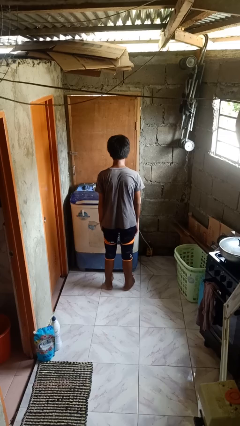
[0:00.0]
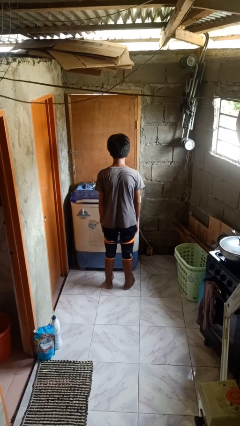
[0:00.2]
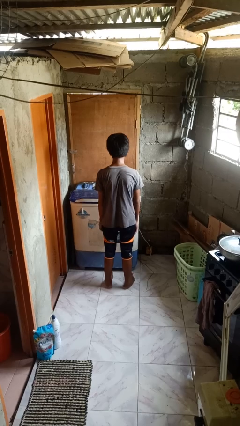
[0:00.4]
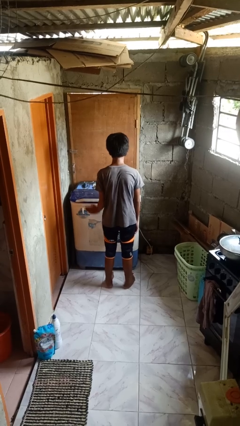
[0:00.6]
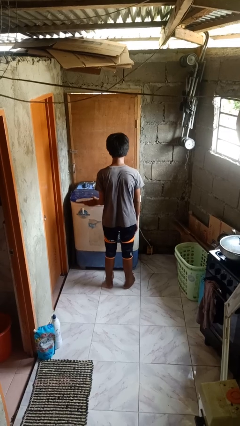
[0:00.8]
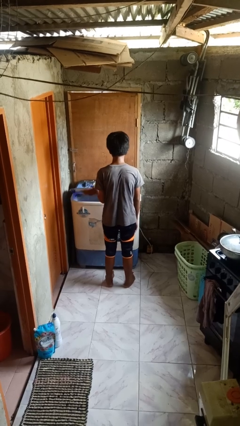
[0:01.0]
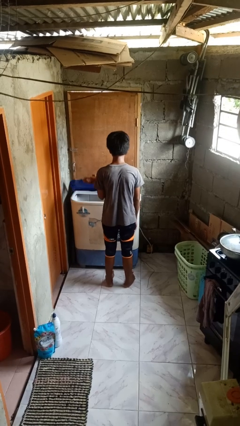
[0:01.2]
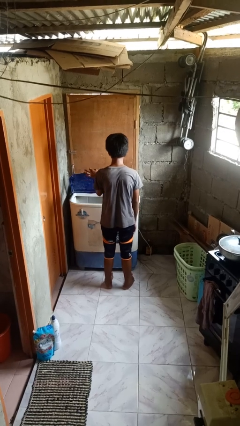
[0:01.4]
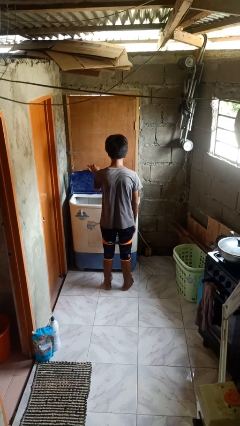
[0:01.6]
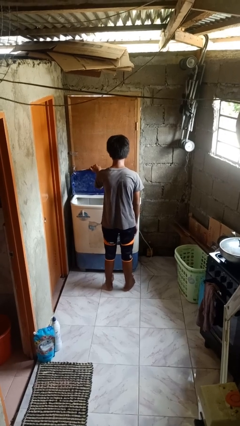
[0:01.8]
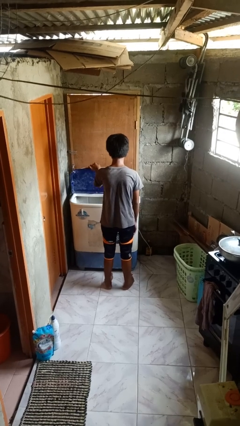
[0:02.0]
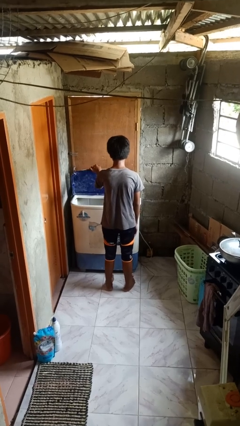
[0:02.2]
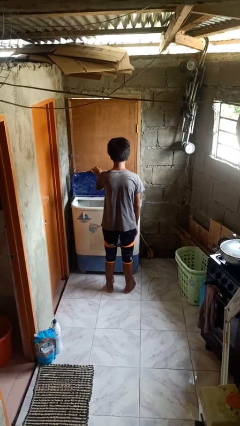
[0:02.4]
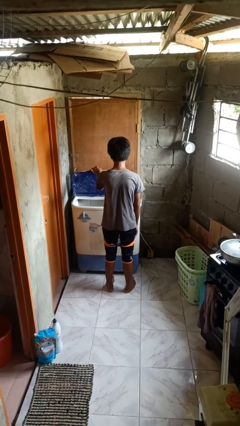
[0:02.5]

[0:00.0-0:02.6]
person opens clothes washer

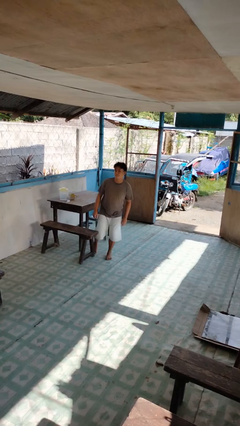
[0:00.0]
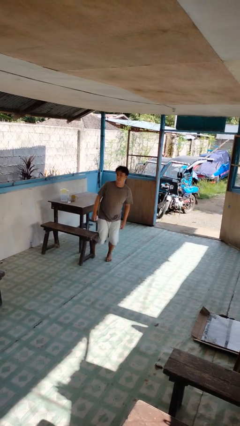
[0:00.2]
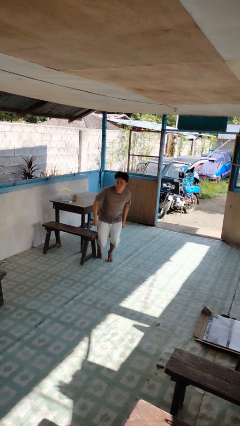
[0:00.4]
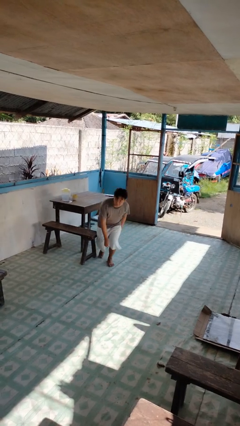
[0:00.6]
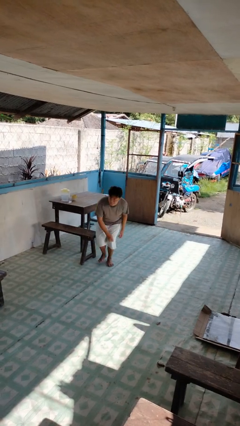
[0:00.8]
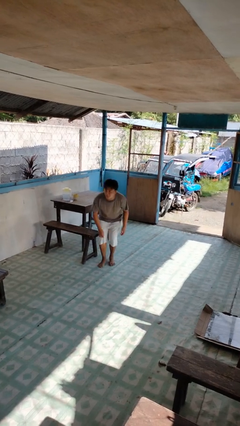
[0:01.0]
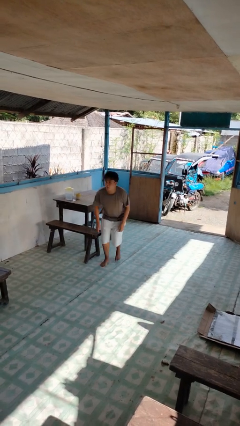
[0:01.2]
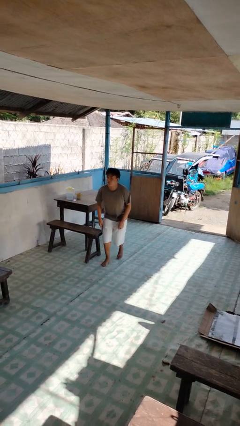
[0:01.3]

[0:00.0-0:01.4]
person stubs toe

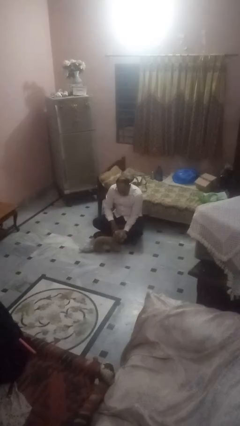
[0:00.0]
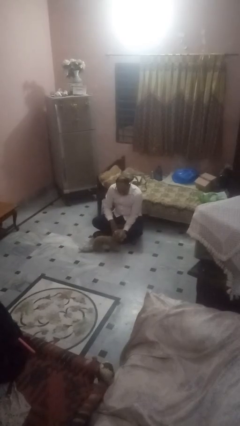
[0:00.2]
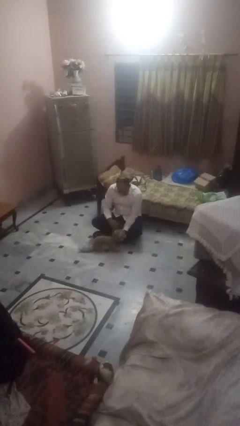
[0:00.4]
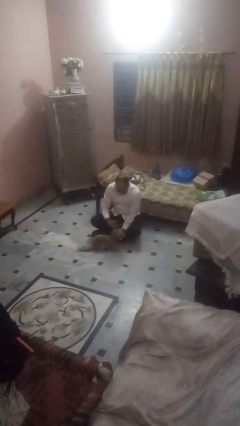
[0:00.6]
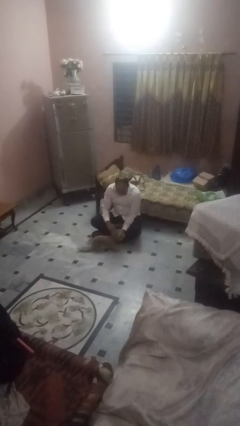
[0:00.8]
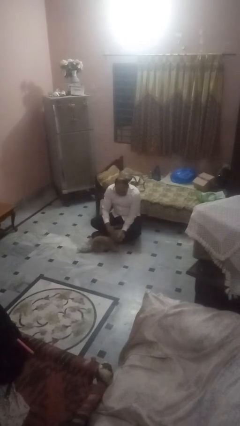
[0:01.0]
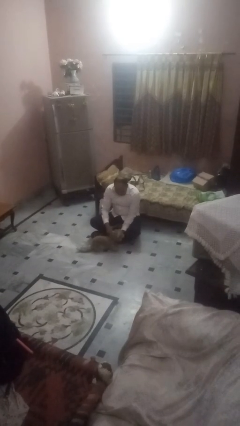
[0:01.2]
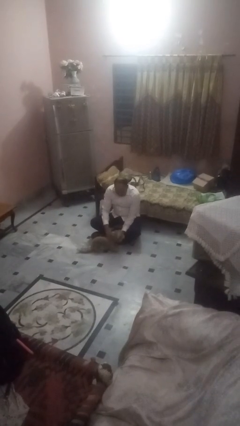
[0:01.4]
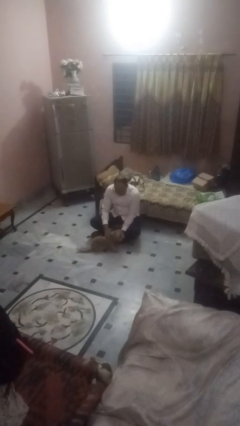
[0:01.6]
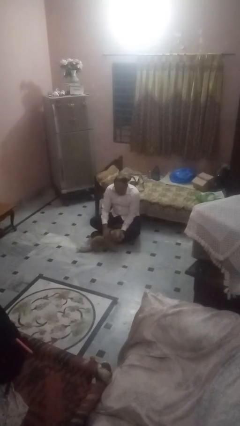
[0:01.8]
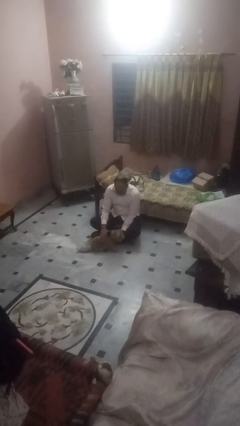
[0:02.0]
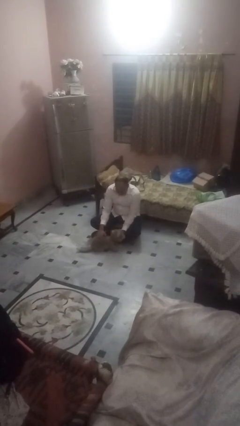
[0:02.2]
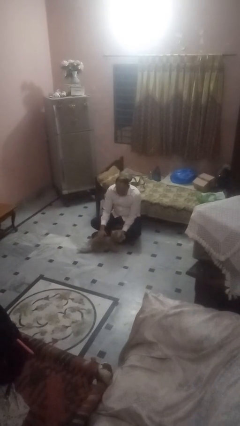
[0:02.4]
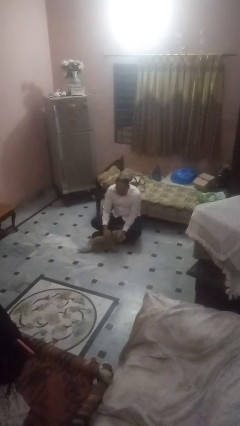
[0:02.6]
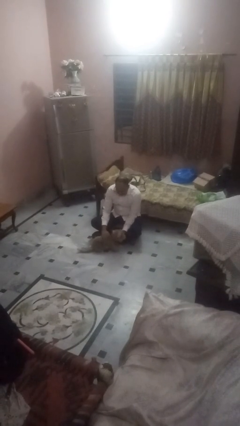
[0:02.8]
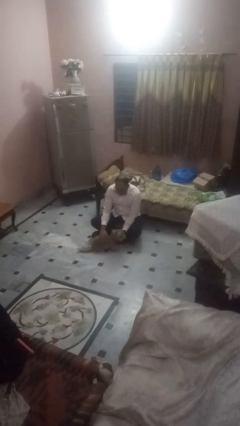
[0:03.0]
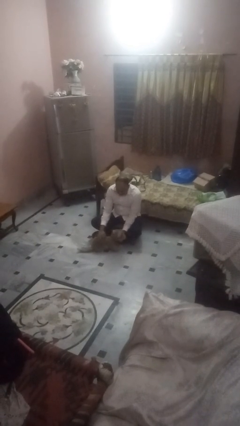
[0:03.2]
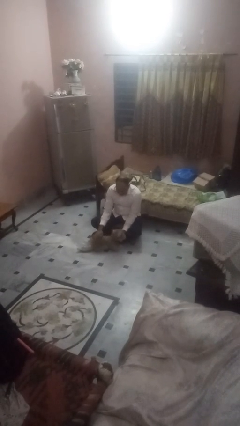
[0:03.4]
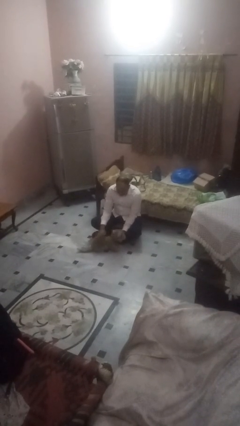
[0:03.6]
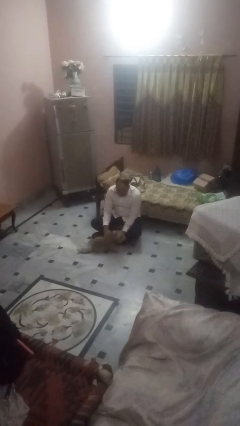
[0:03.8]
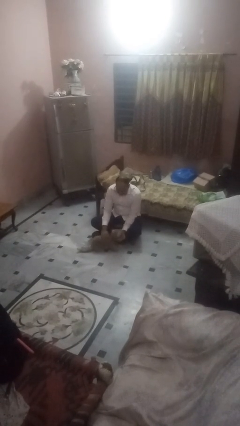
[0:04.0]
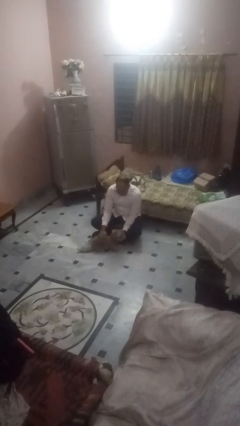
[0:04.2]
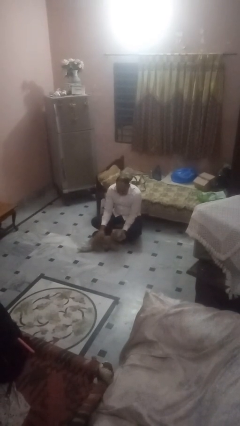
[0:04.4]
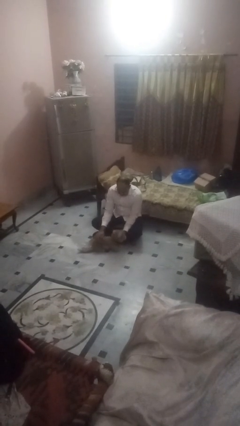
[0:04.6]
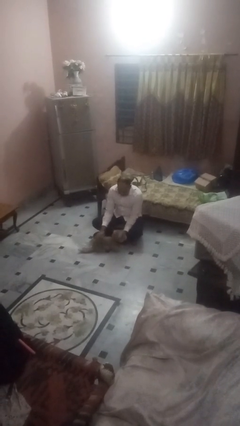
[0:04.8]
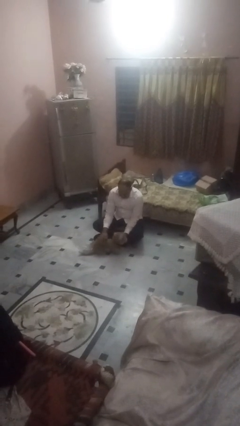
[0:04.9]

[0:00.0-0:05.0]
person pets dog

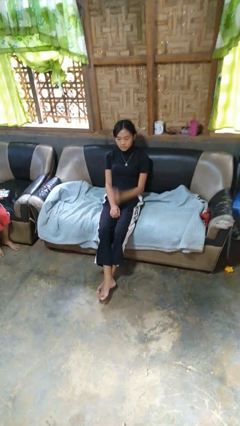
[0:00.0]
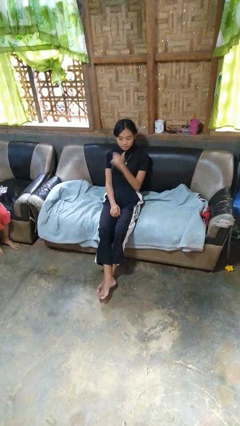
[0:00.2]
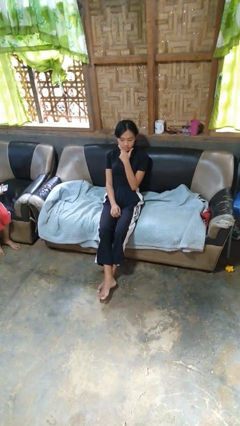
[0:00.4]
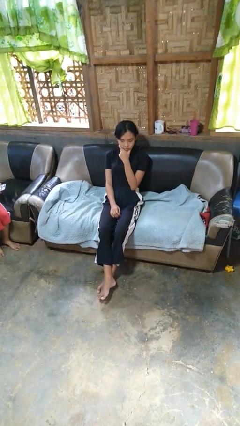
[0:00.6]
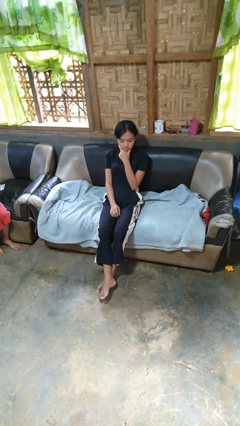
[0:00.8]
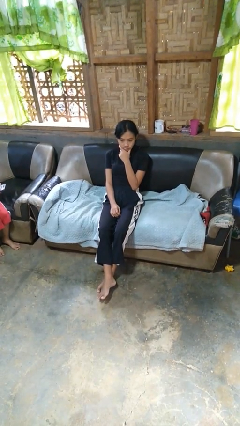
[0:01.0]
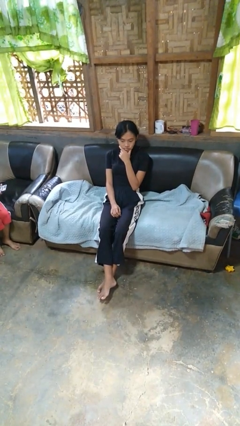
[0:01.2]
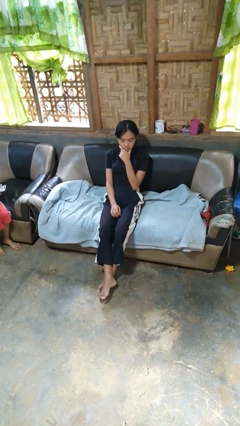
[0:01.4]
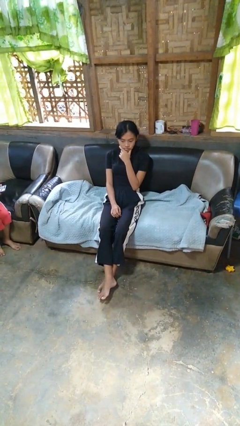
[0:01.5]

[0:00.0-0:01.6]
person strokes chin

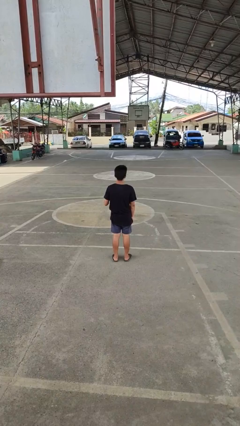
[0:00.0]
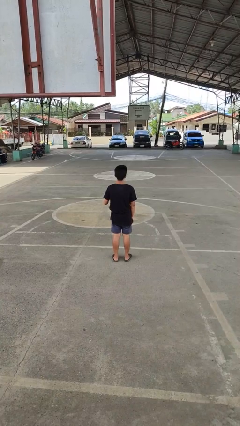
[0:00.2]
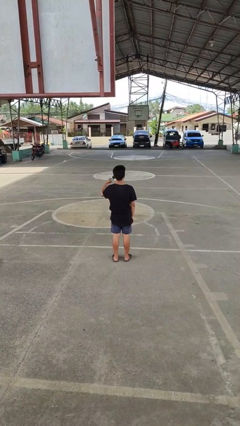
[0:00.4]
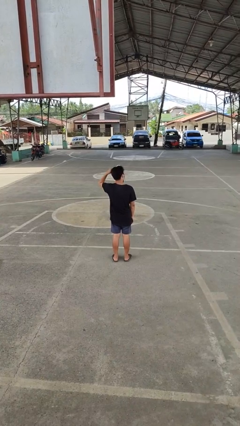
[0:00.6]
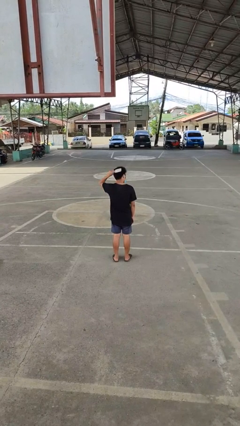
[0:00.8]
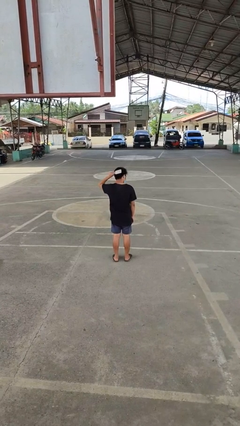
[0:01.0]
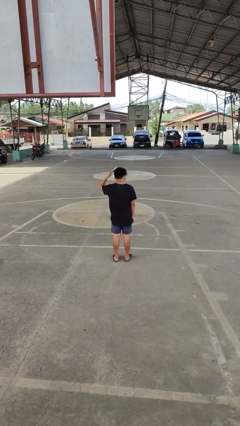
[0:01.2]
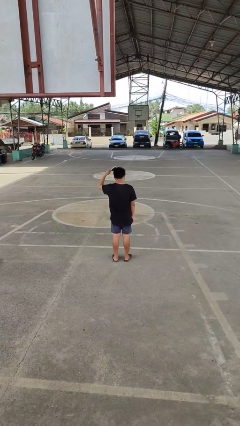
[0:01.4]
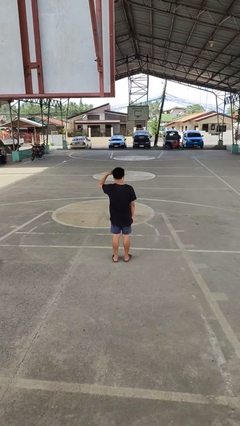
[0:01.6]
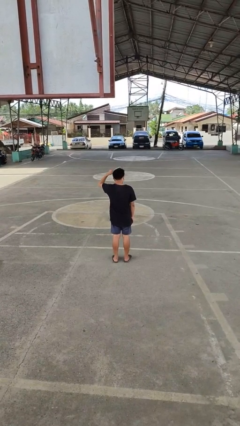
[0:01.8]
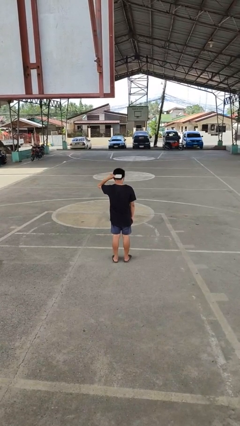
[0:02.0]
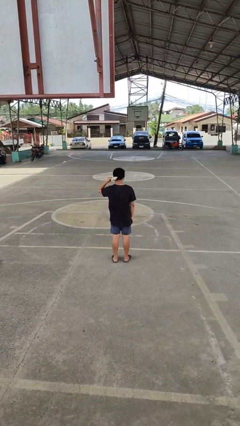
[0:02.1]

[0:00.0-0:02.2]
person brushes hair

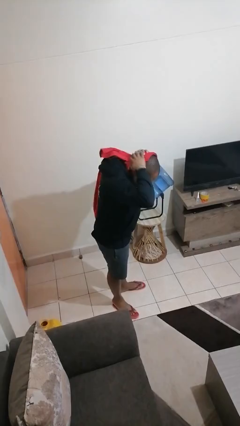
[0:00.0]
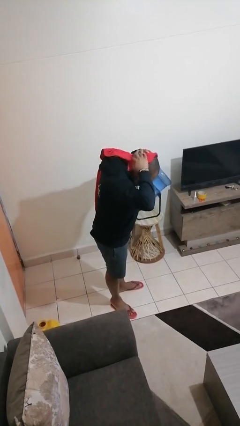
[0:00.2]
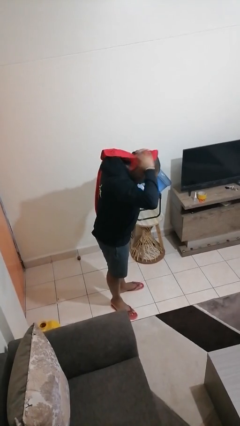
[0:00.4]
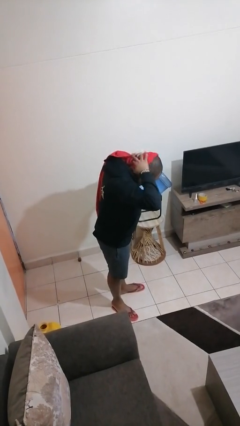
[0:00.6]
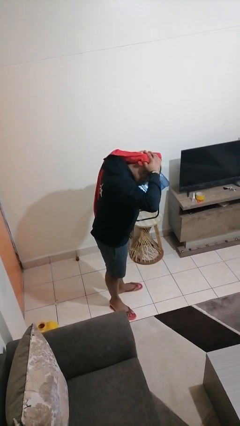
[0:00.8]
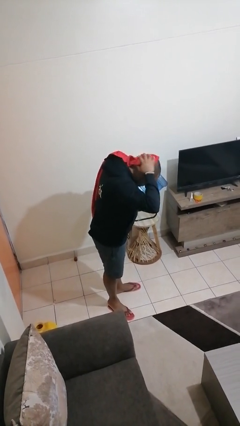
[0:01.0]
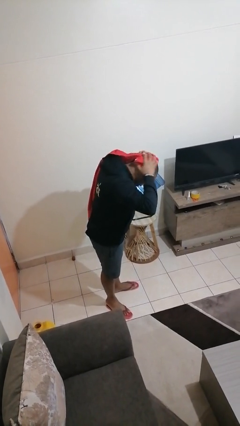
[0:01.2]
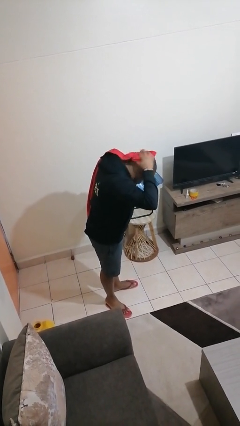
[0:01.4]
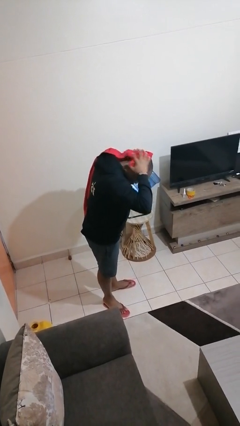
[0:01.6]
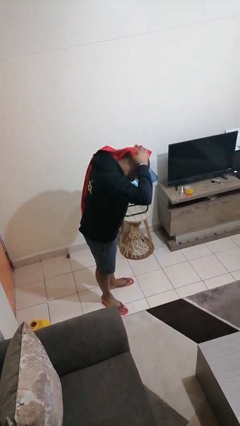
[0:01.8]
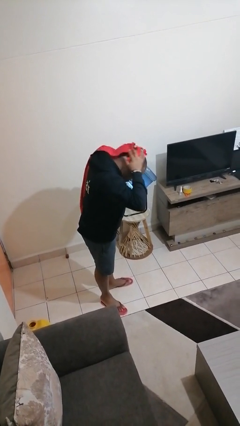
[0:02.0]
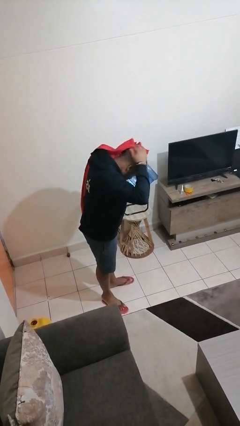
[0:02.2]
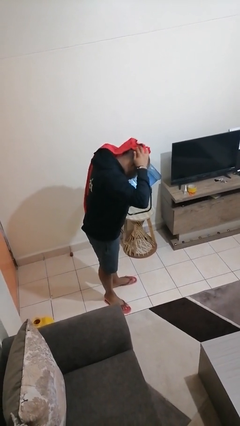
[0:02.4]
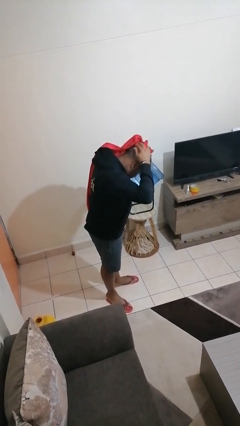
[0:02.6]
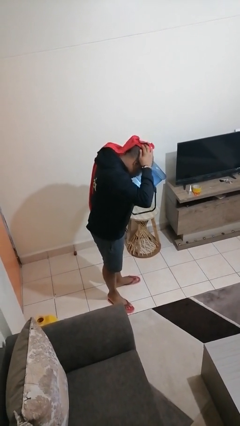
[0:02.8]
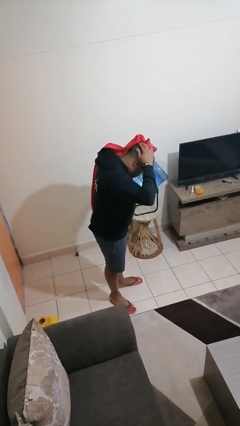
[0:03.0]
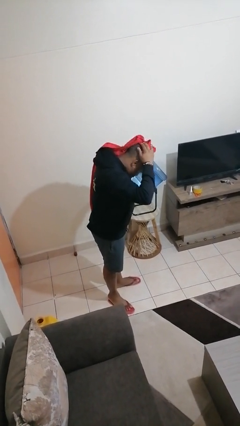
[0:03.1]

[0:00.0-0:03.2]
person dries hair with towel

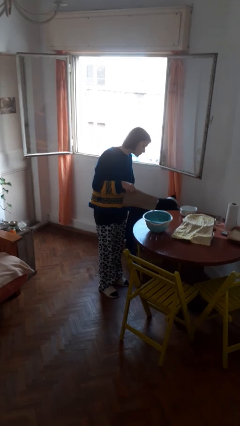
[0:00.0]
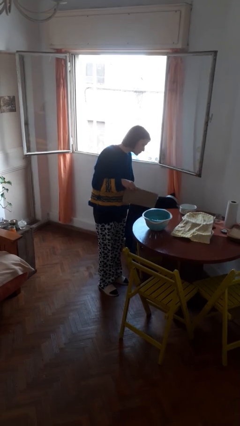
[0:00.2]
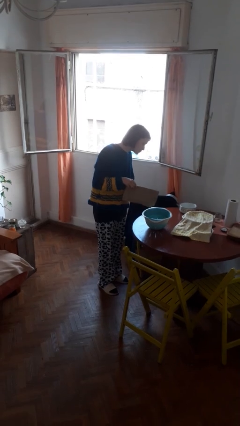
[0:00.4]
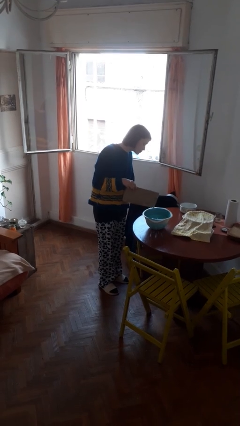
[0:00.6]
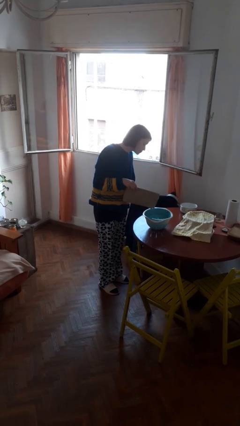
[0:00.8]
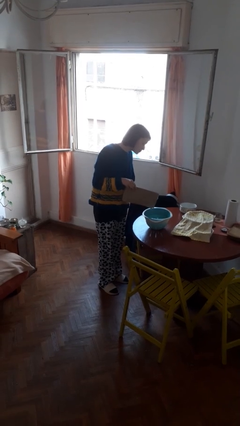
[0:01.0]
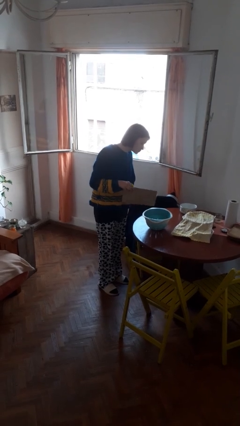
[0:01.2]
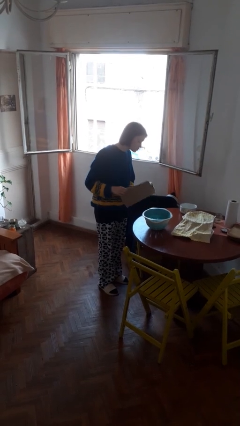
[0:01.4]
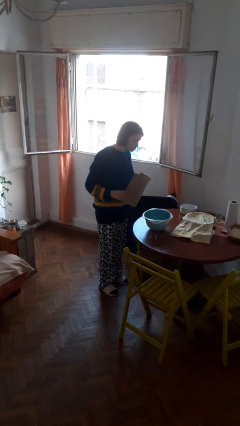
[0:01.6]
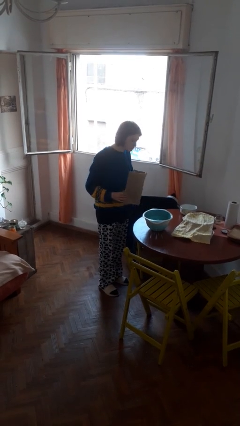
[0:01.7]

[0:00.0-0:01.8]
person pours into bowl
